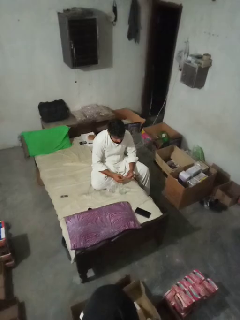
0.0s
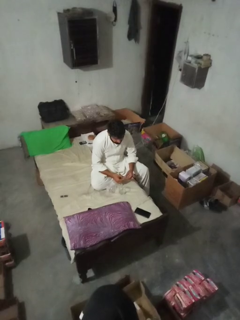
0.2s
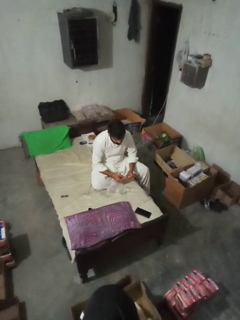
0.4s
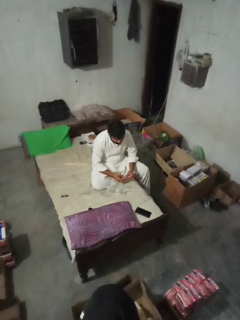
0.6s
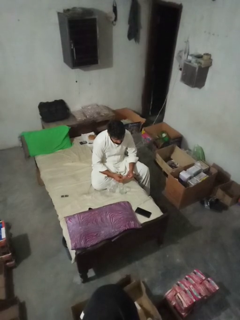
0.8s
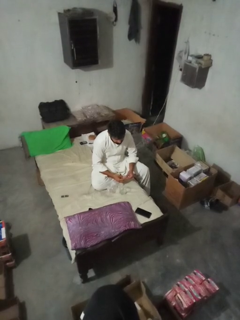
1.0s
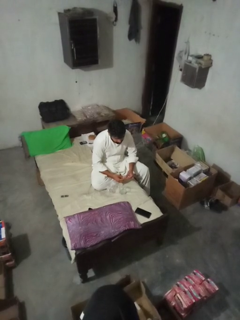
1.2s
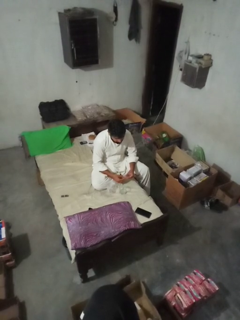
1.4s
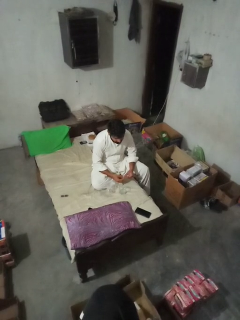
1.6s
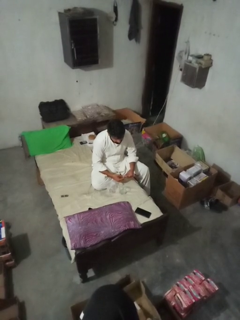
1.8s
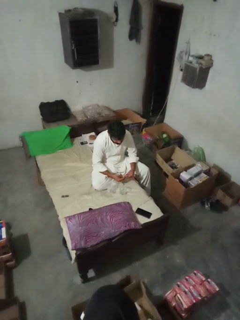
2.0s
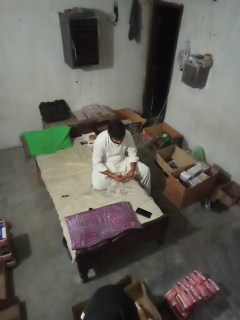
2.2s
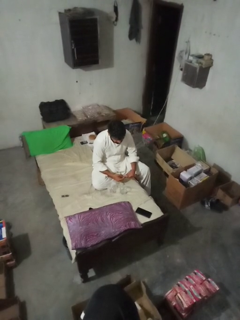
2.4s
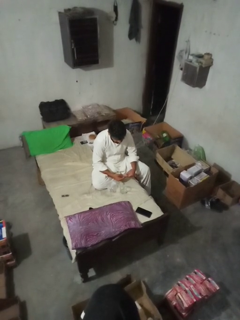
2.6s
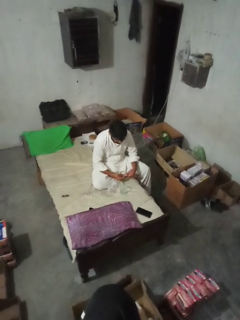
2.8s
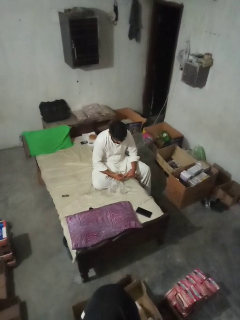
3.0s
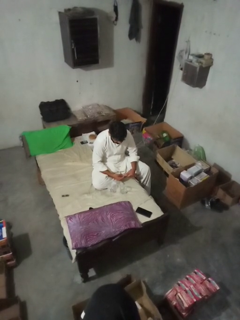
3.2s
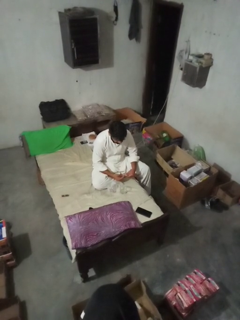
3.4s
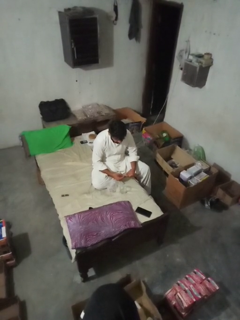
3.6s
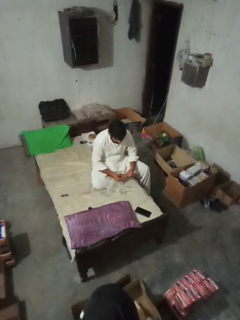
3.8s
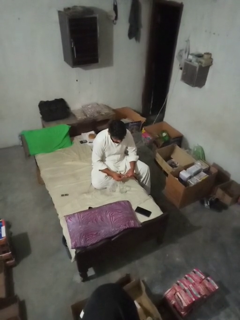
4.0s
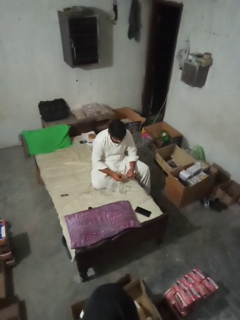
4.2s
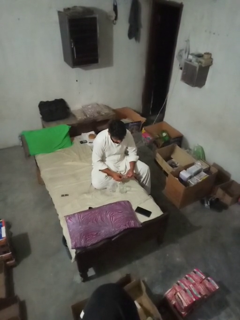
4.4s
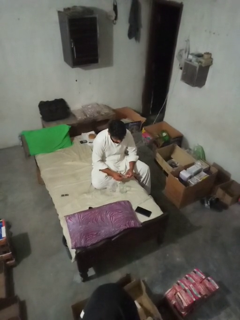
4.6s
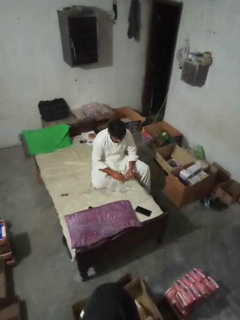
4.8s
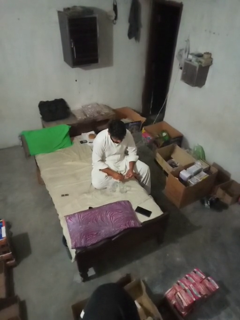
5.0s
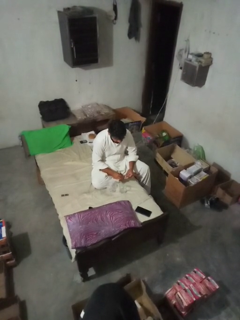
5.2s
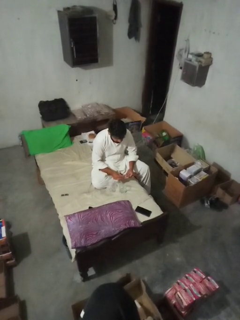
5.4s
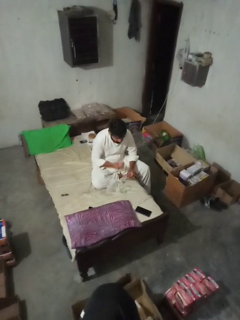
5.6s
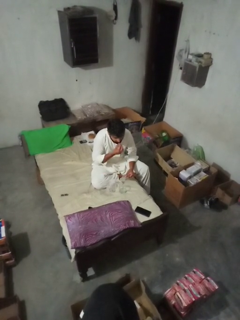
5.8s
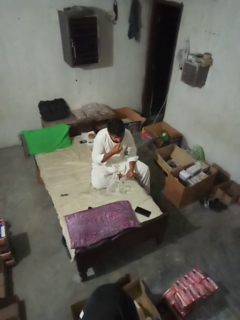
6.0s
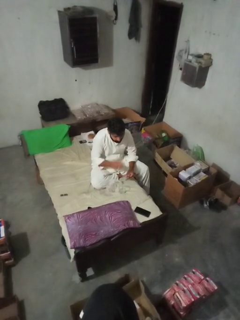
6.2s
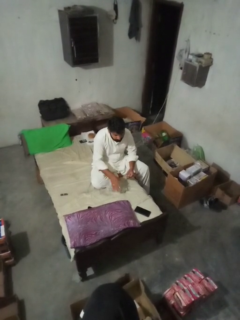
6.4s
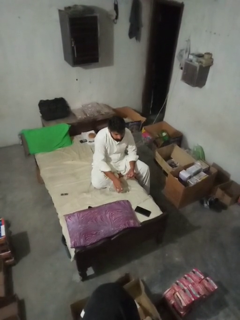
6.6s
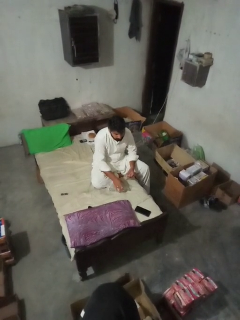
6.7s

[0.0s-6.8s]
person takes medicine pills

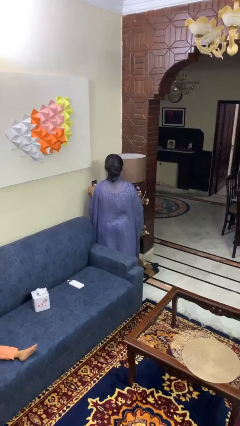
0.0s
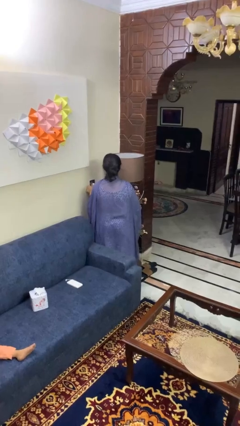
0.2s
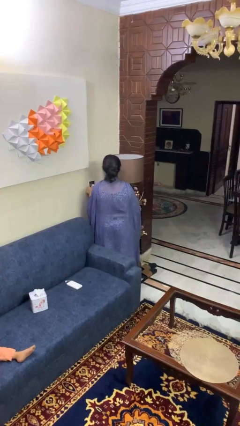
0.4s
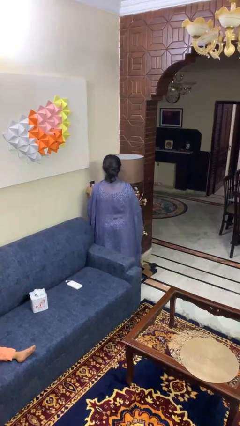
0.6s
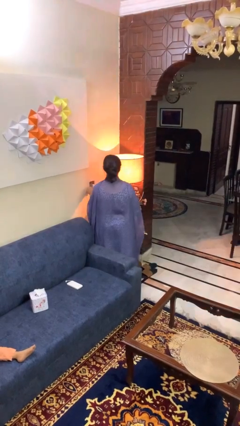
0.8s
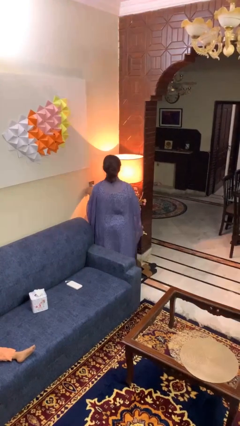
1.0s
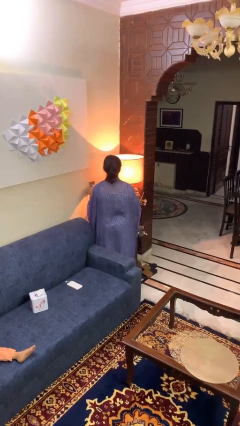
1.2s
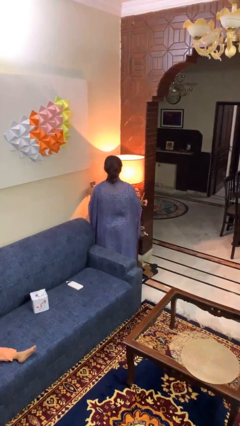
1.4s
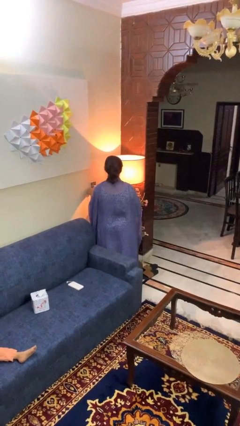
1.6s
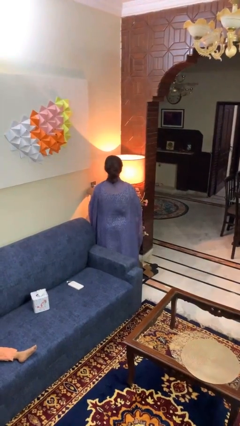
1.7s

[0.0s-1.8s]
person turns on lamp

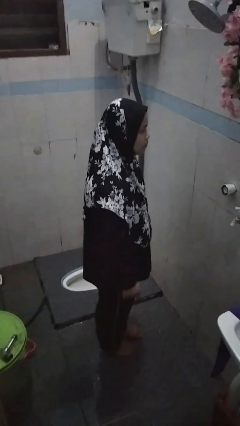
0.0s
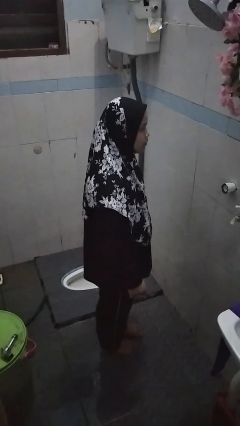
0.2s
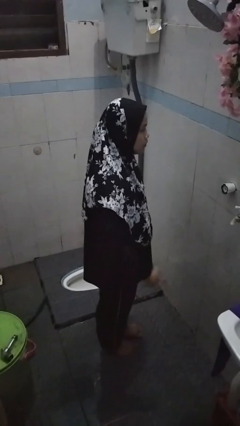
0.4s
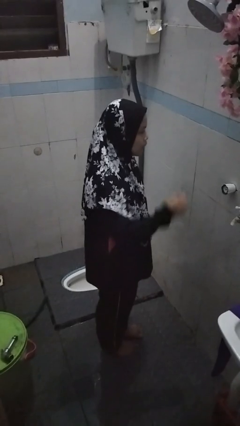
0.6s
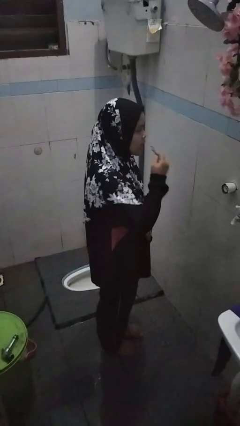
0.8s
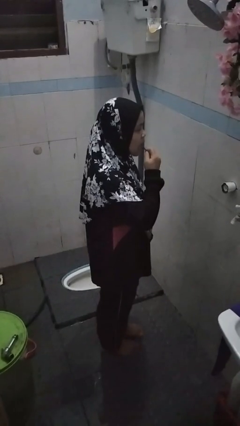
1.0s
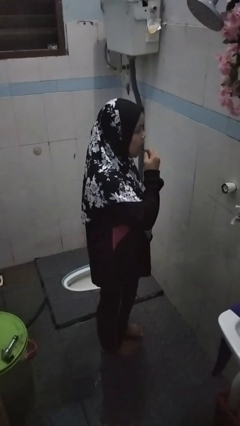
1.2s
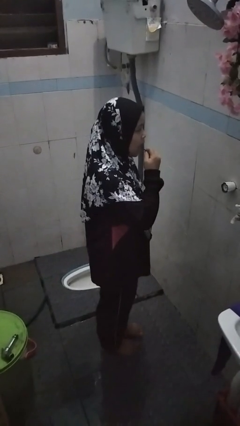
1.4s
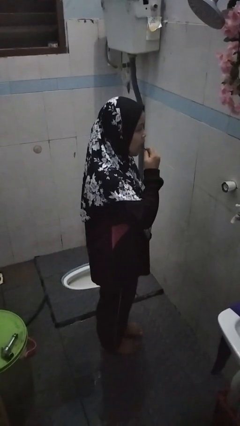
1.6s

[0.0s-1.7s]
person flosses

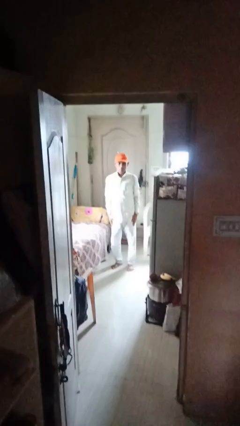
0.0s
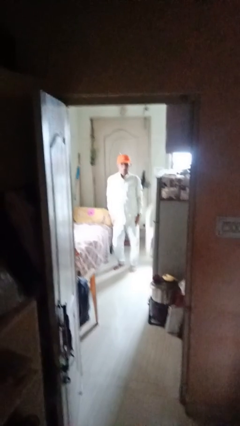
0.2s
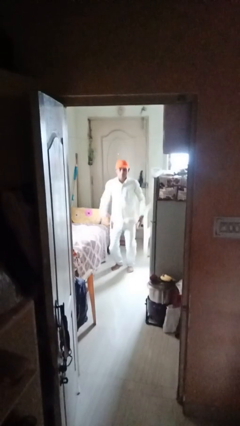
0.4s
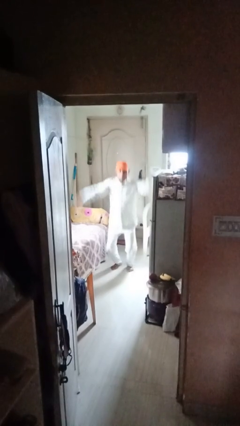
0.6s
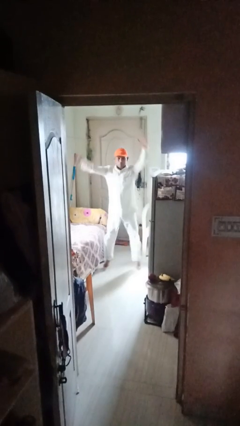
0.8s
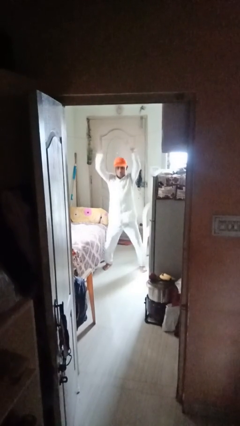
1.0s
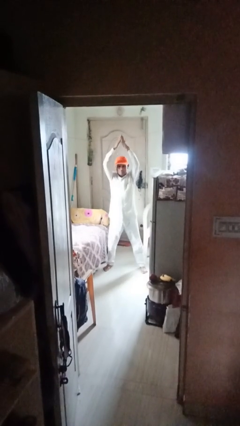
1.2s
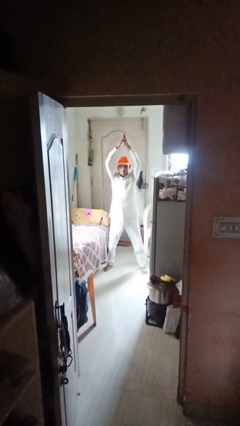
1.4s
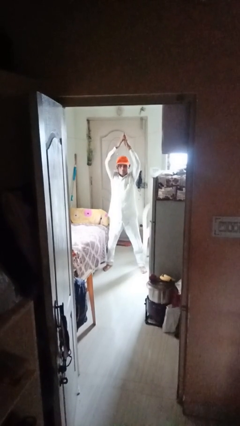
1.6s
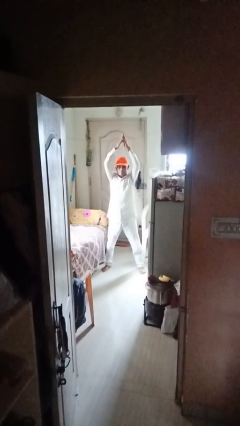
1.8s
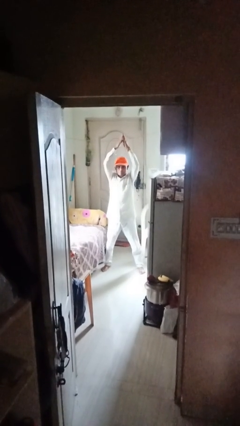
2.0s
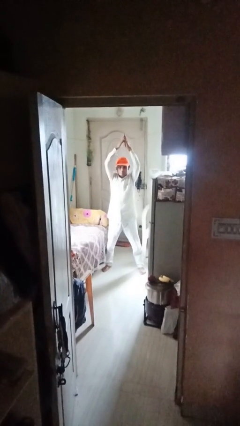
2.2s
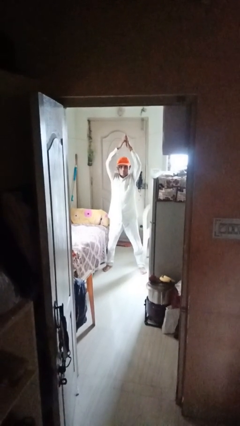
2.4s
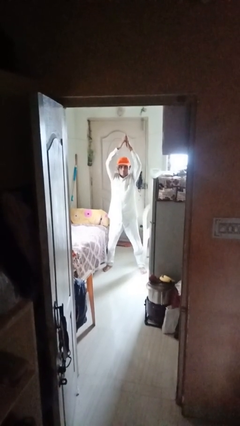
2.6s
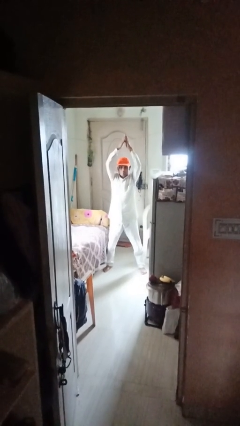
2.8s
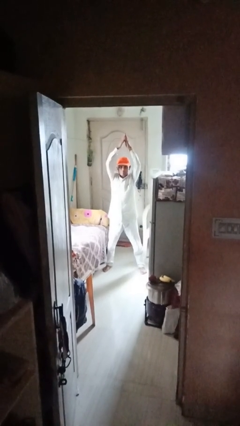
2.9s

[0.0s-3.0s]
person exercises with jumping jacks

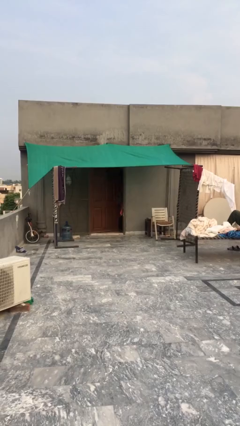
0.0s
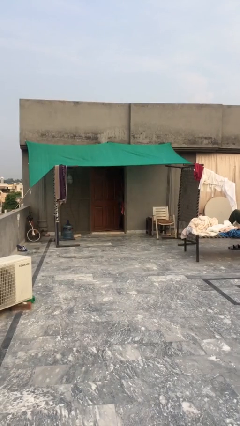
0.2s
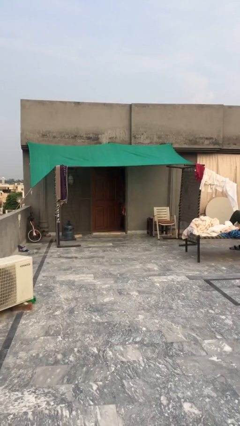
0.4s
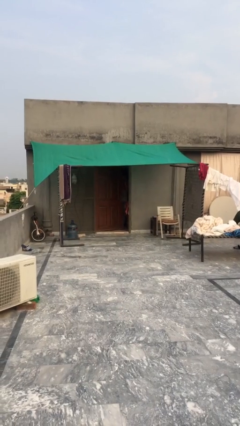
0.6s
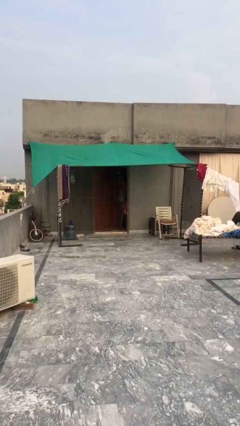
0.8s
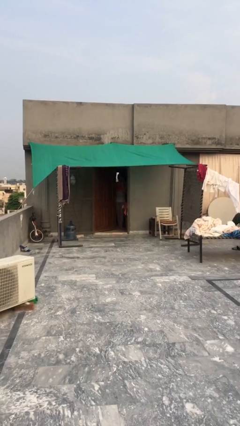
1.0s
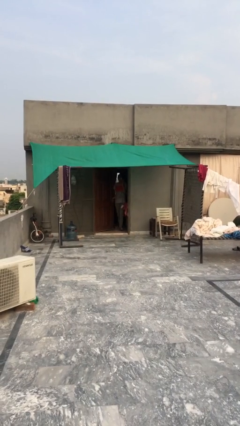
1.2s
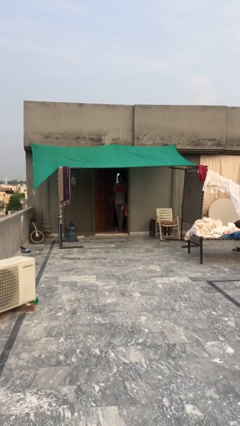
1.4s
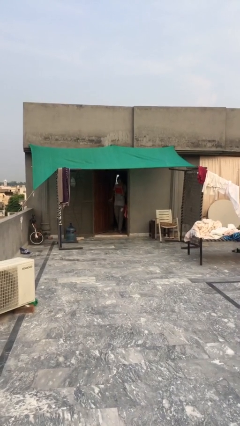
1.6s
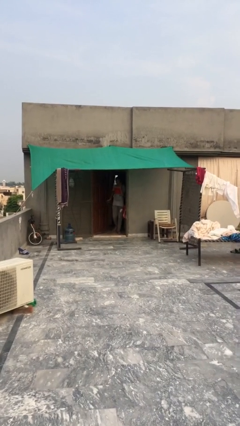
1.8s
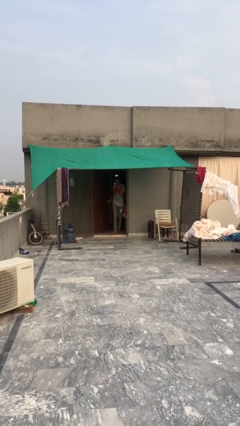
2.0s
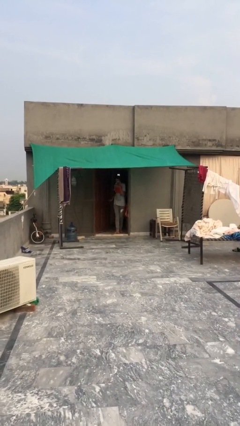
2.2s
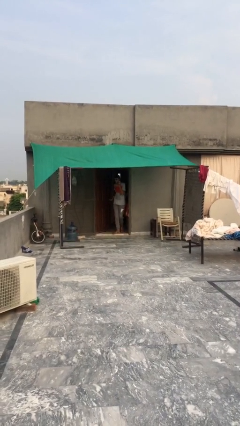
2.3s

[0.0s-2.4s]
person opens facility door

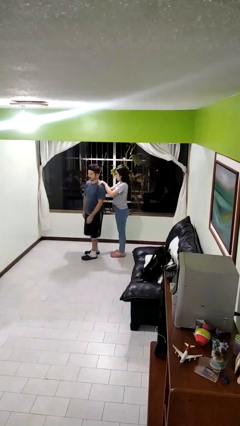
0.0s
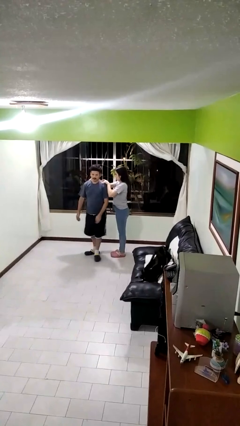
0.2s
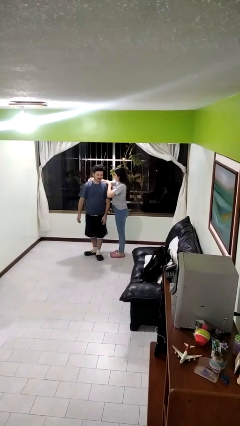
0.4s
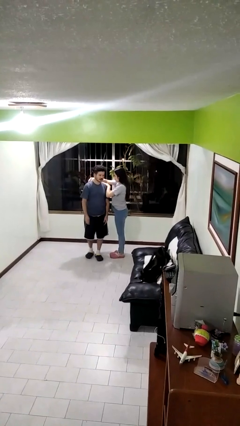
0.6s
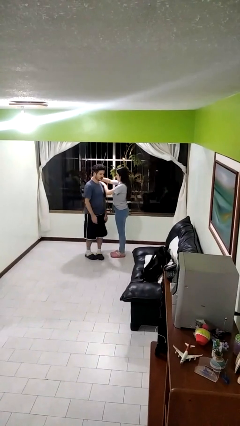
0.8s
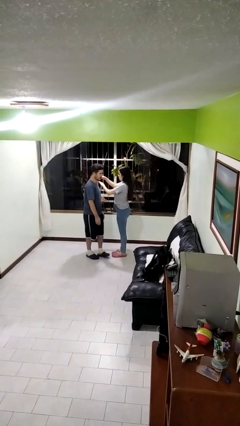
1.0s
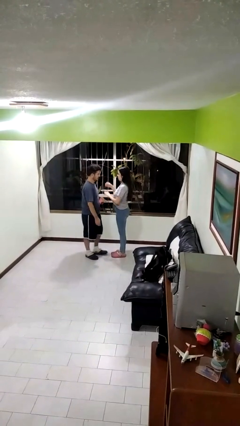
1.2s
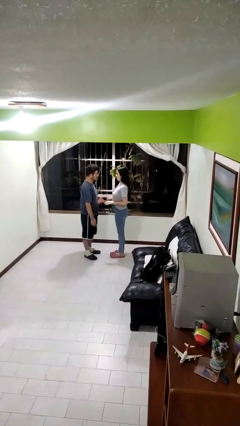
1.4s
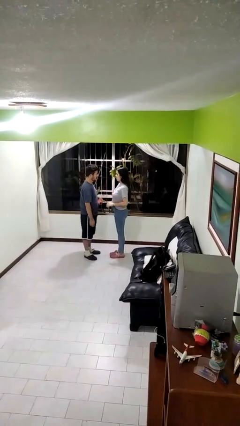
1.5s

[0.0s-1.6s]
person spins person around

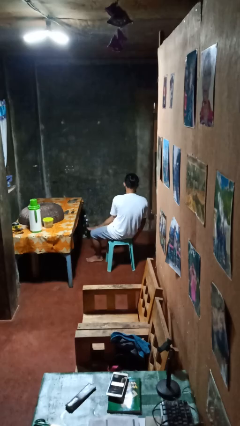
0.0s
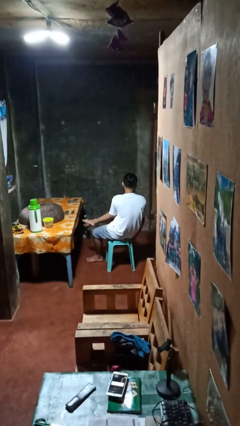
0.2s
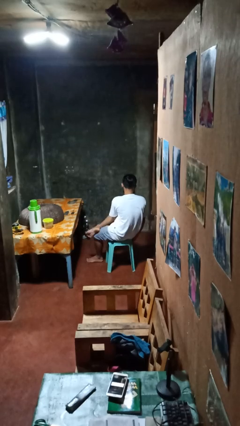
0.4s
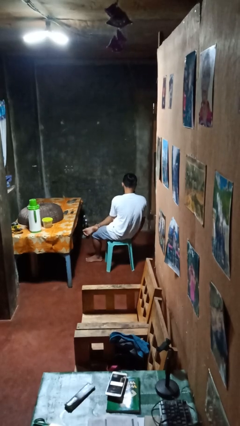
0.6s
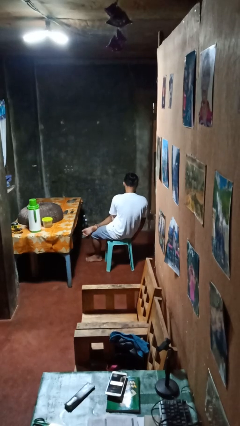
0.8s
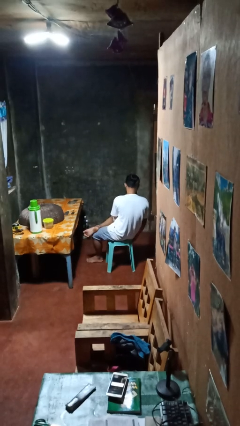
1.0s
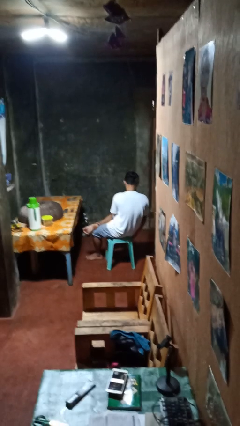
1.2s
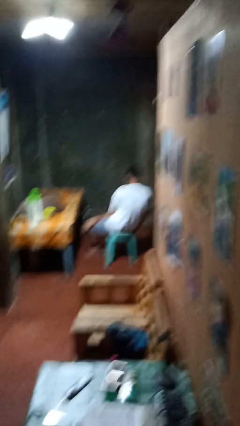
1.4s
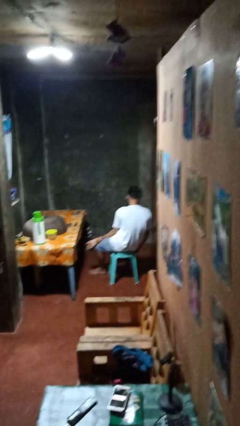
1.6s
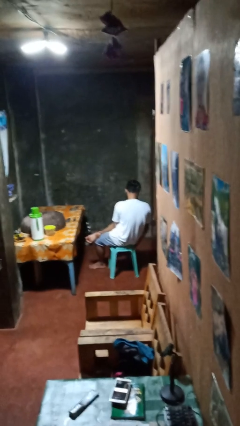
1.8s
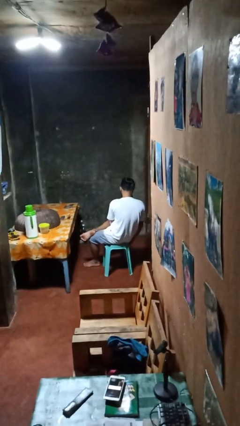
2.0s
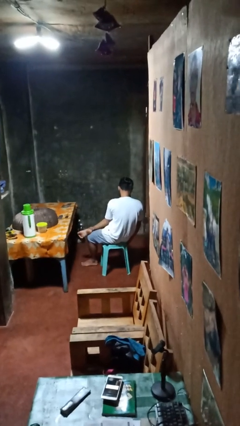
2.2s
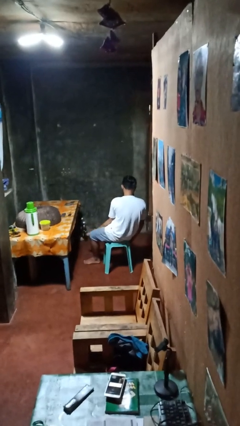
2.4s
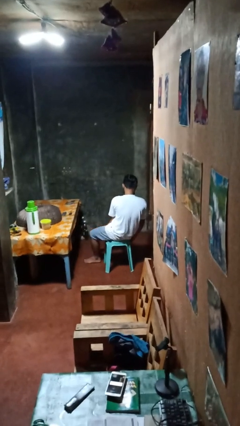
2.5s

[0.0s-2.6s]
person crosses legs
